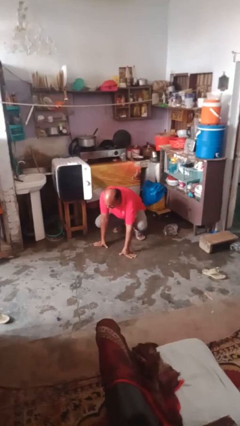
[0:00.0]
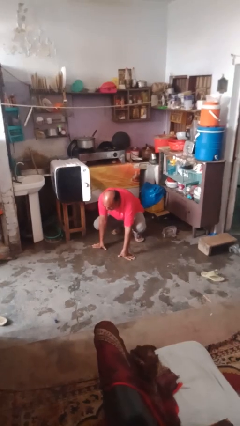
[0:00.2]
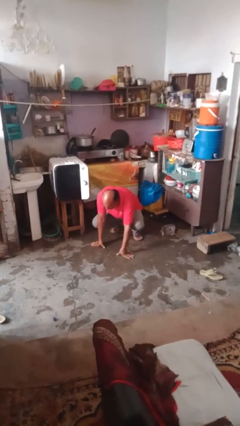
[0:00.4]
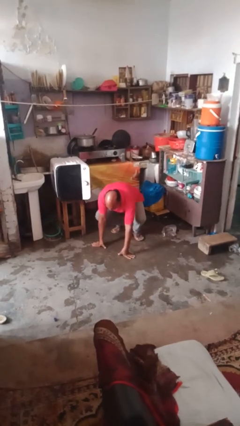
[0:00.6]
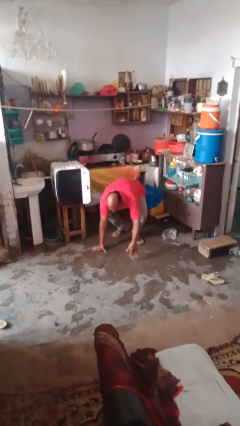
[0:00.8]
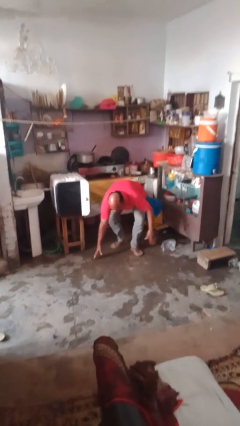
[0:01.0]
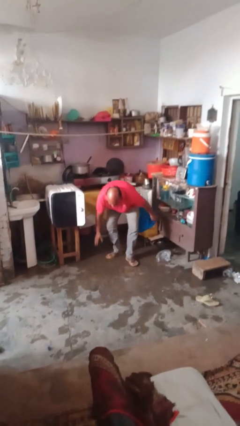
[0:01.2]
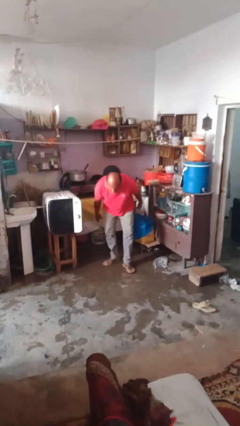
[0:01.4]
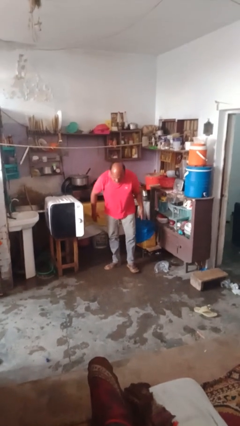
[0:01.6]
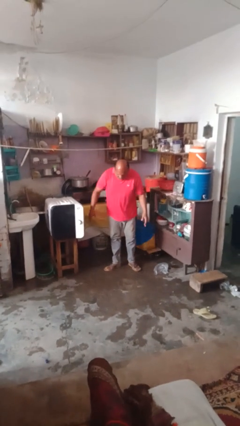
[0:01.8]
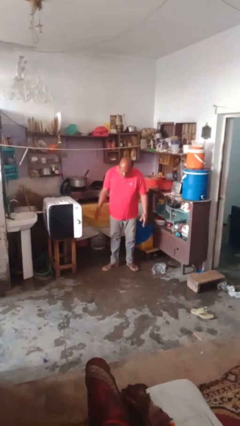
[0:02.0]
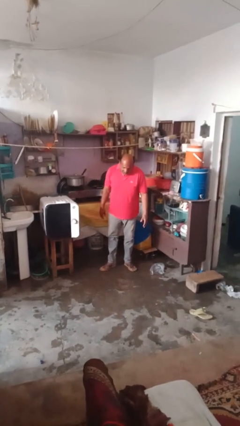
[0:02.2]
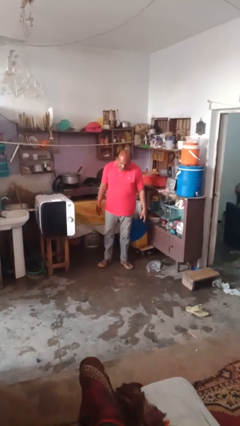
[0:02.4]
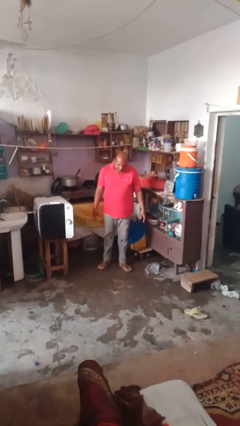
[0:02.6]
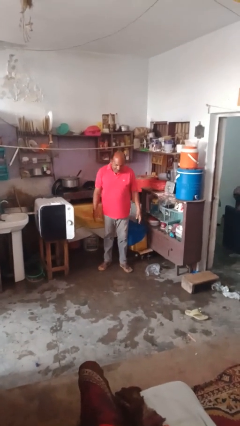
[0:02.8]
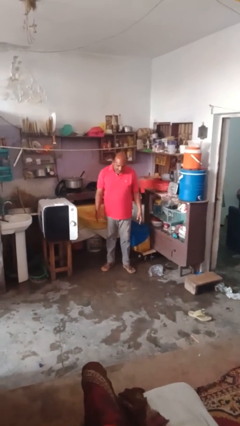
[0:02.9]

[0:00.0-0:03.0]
person stands up from floor

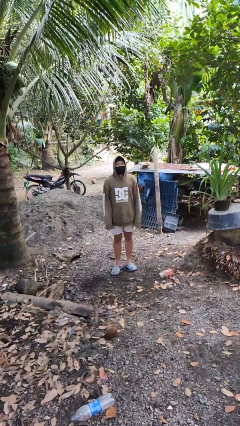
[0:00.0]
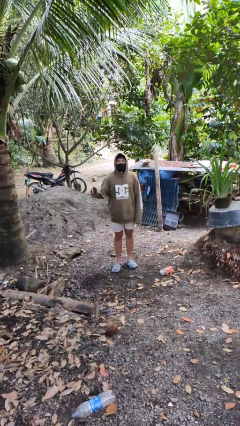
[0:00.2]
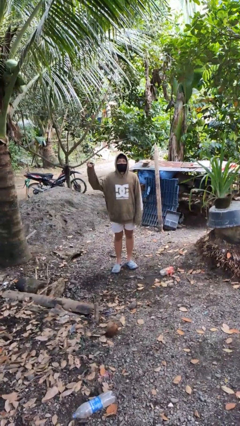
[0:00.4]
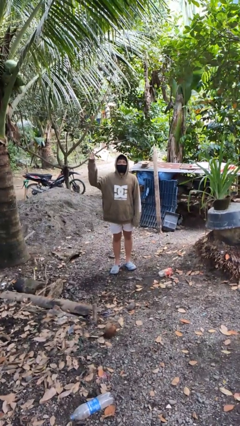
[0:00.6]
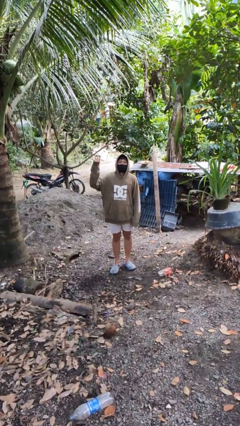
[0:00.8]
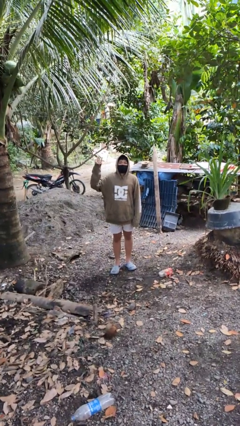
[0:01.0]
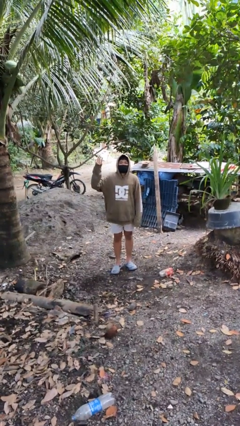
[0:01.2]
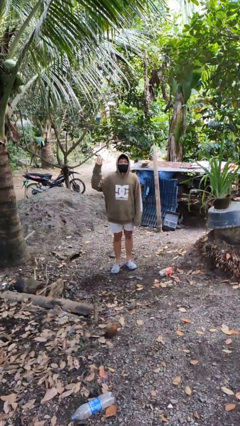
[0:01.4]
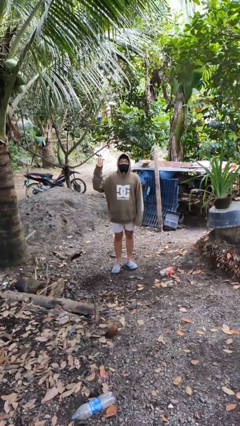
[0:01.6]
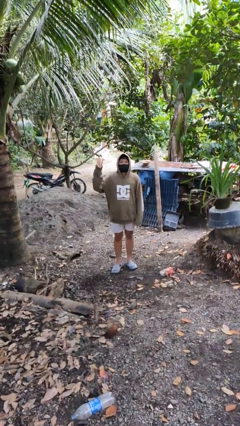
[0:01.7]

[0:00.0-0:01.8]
person gestures number three

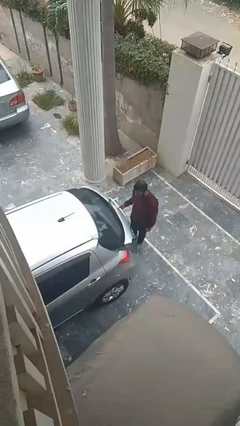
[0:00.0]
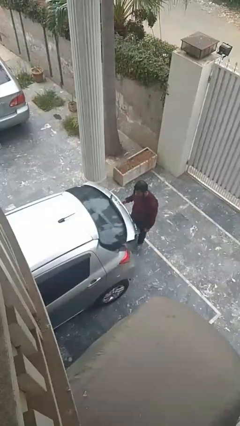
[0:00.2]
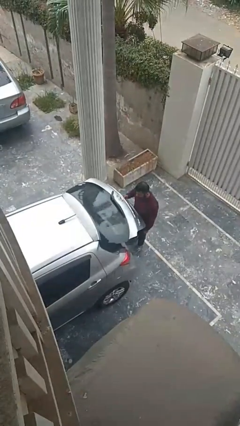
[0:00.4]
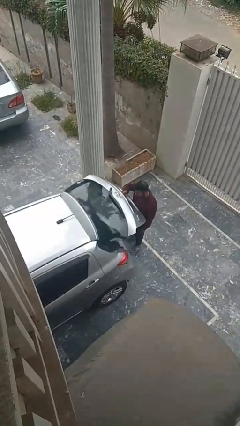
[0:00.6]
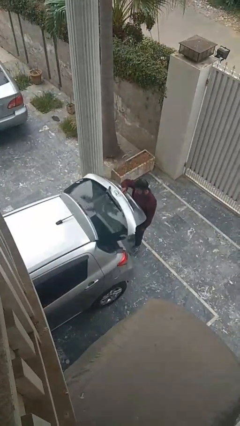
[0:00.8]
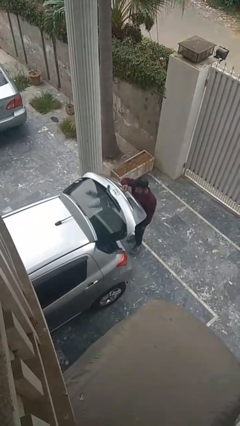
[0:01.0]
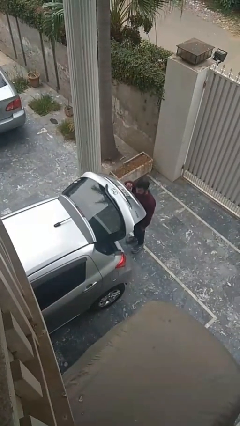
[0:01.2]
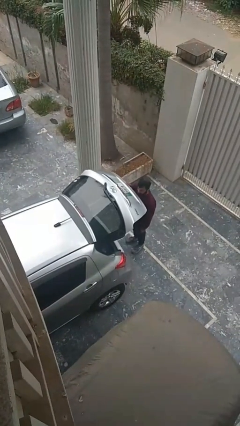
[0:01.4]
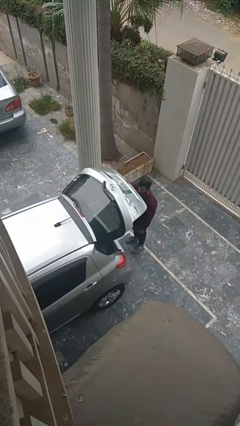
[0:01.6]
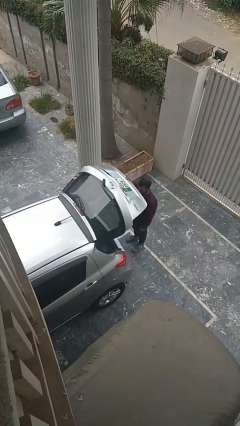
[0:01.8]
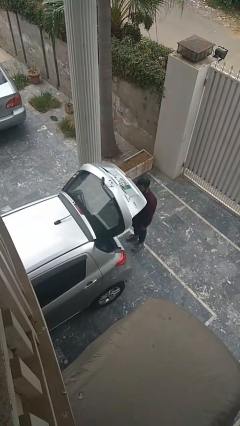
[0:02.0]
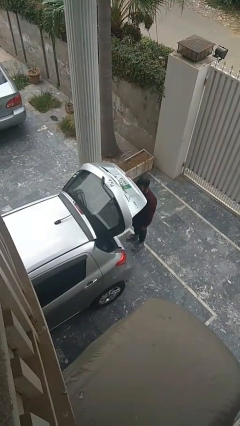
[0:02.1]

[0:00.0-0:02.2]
person opens car trunk

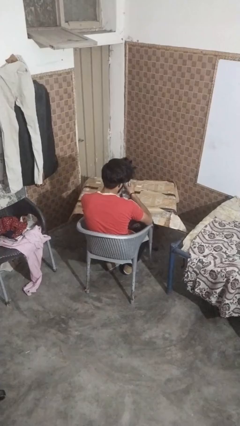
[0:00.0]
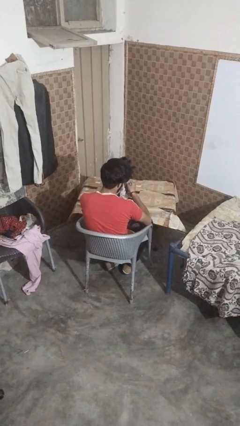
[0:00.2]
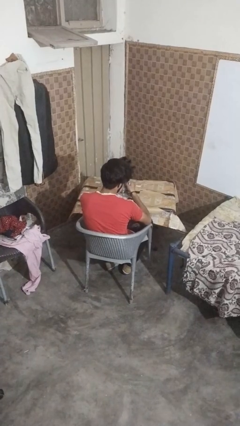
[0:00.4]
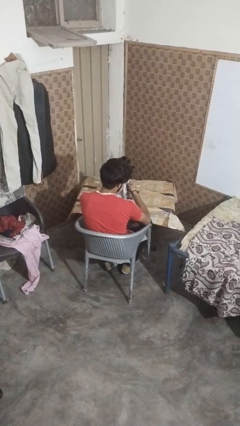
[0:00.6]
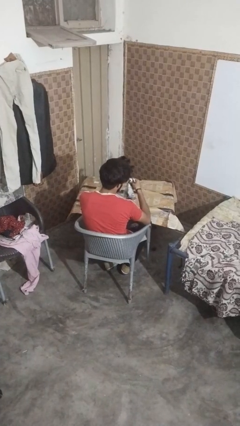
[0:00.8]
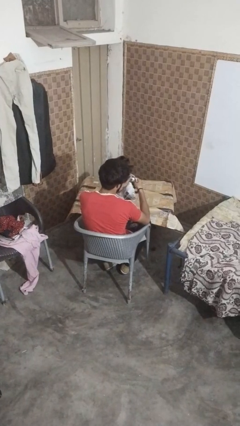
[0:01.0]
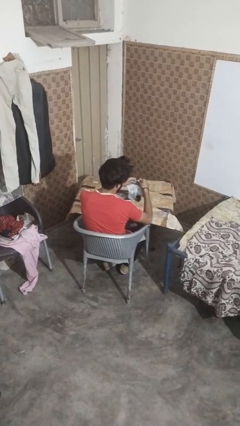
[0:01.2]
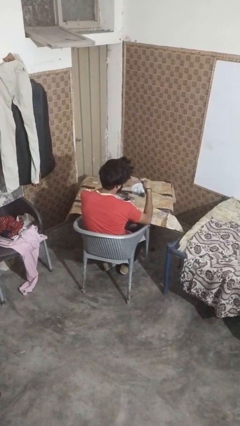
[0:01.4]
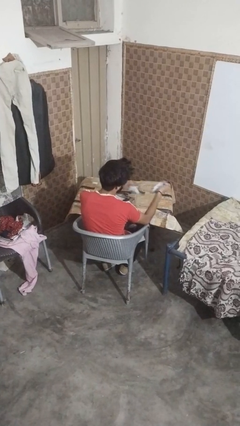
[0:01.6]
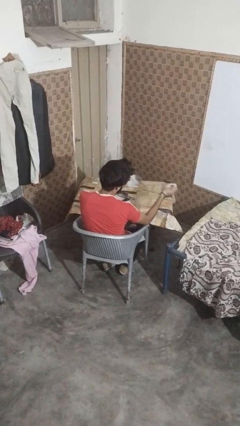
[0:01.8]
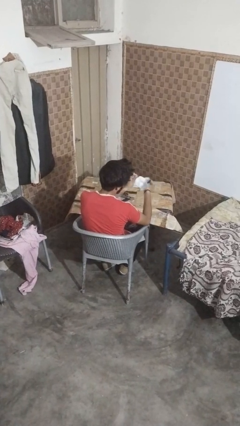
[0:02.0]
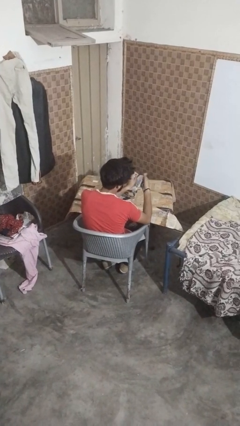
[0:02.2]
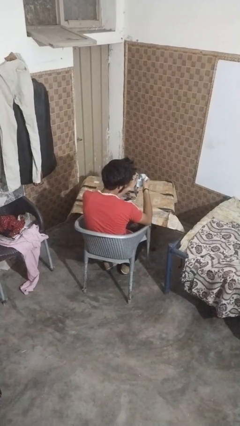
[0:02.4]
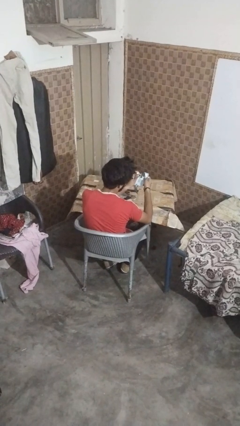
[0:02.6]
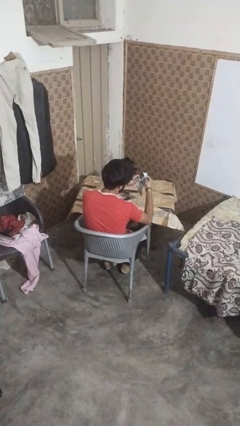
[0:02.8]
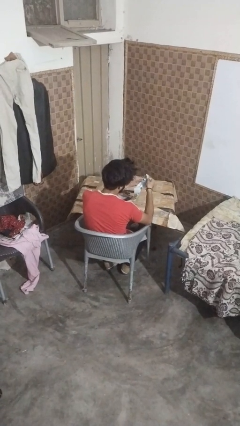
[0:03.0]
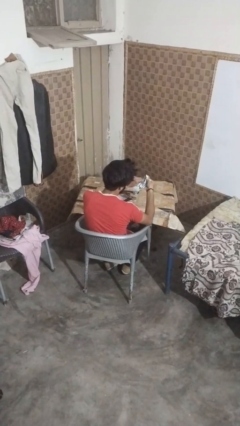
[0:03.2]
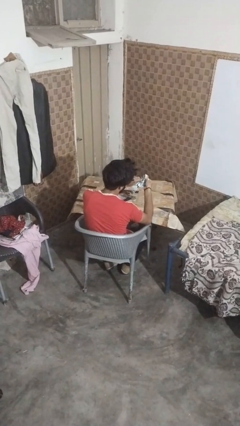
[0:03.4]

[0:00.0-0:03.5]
person tears paper

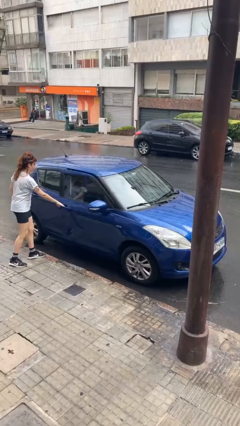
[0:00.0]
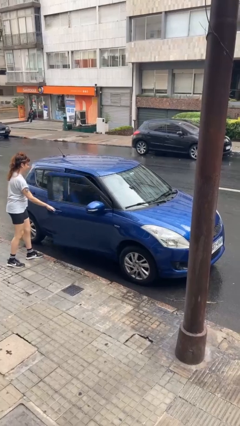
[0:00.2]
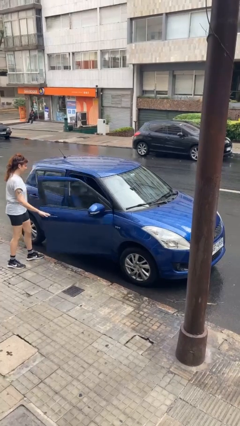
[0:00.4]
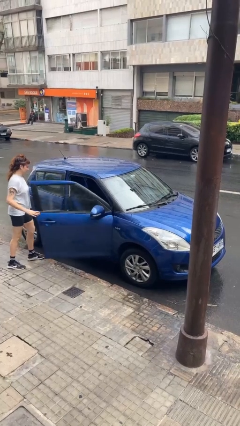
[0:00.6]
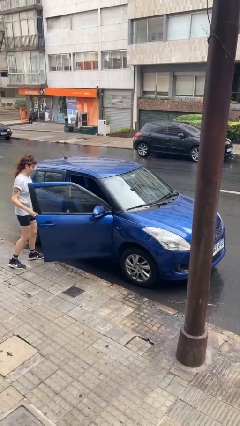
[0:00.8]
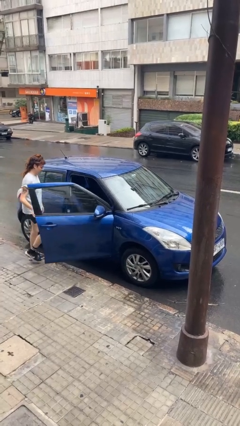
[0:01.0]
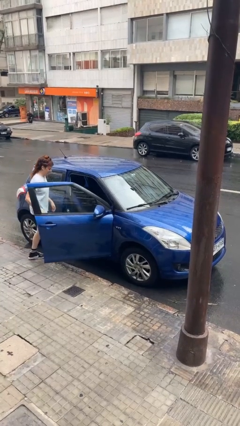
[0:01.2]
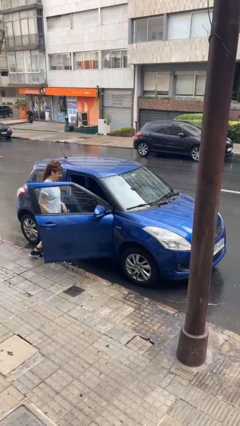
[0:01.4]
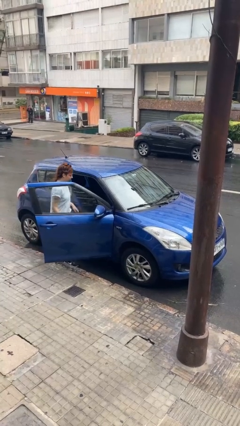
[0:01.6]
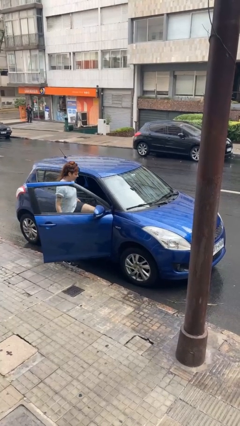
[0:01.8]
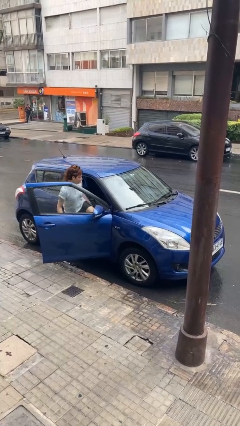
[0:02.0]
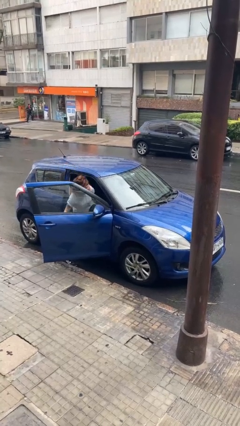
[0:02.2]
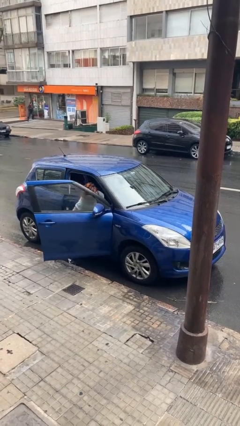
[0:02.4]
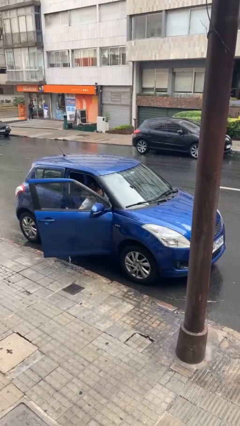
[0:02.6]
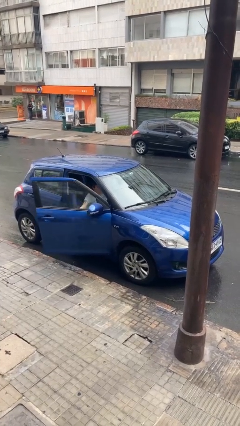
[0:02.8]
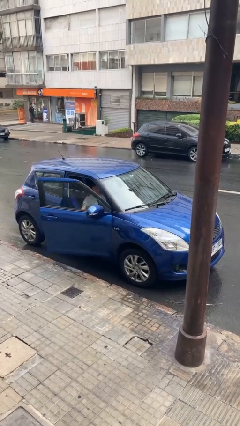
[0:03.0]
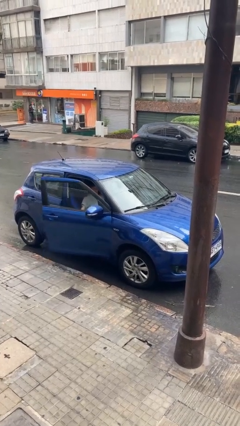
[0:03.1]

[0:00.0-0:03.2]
car picks up person

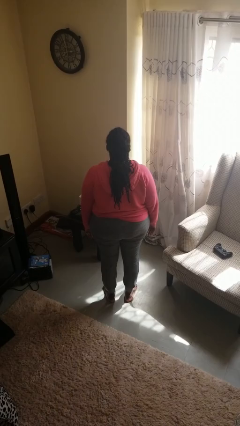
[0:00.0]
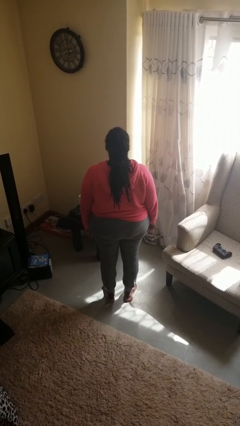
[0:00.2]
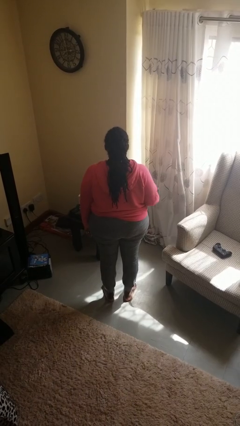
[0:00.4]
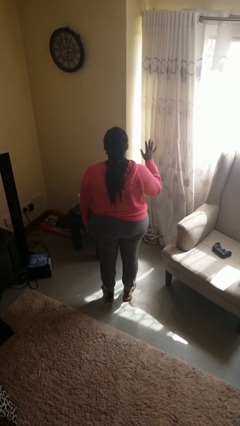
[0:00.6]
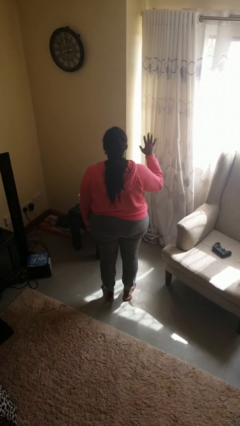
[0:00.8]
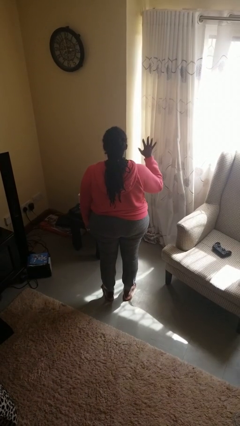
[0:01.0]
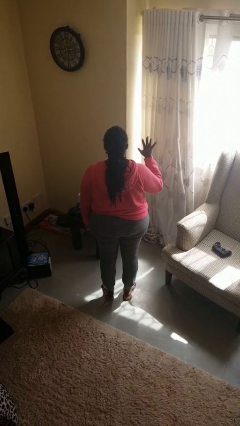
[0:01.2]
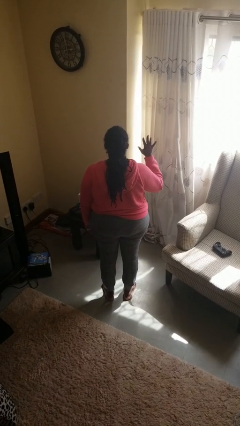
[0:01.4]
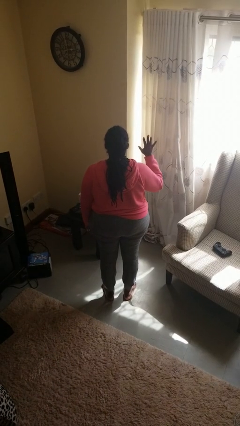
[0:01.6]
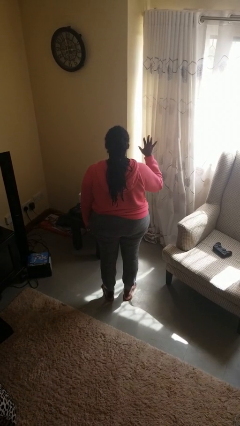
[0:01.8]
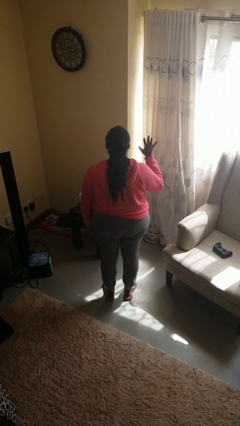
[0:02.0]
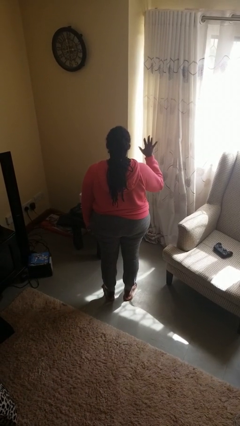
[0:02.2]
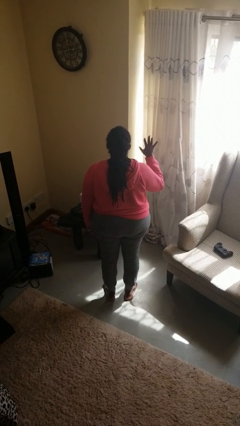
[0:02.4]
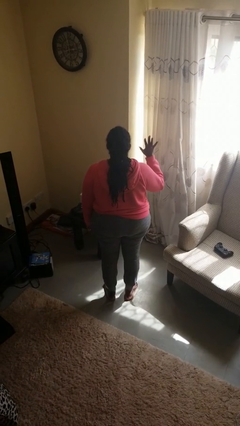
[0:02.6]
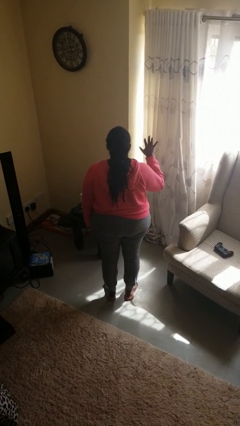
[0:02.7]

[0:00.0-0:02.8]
person gestures number five

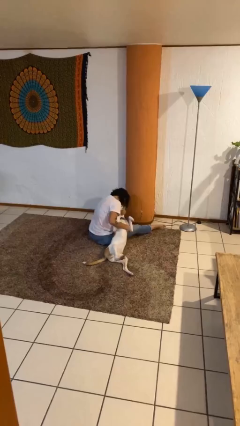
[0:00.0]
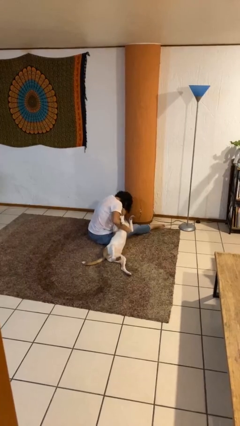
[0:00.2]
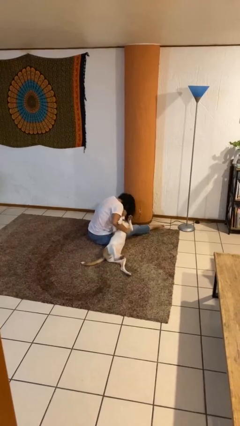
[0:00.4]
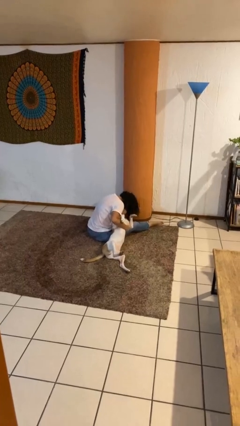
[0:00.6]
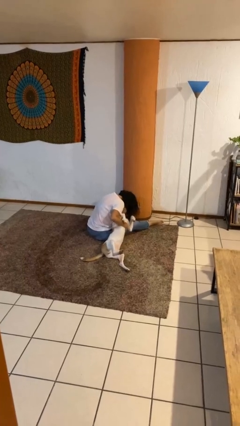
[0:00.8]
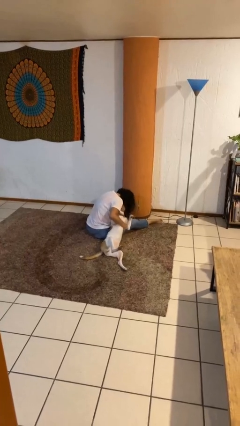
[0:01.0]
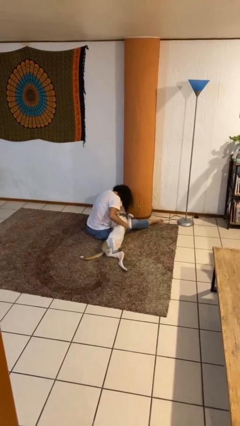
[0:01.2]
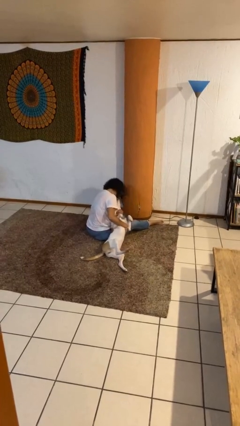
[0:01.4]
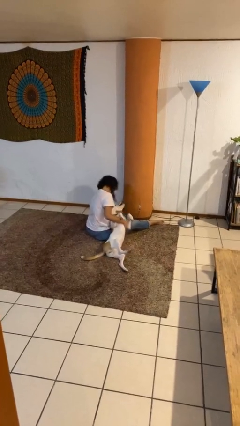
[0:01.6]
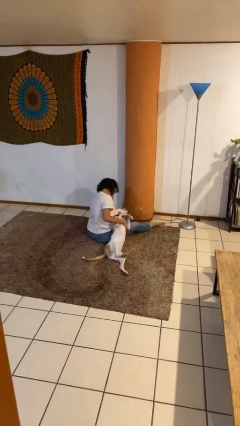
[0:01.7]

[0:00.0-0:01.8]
person hugs dog
